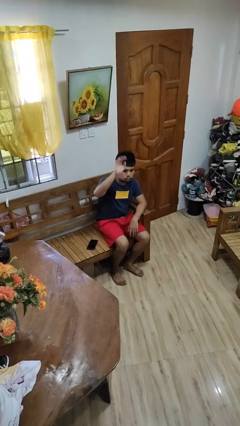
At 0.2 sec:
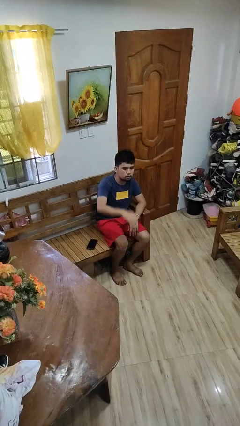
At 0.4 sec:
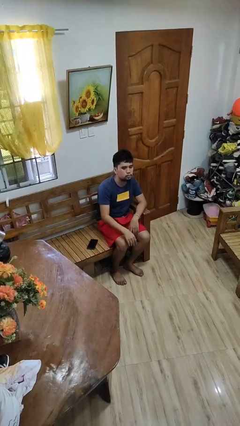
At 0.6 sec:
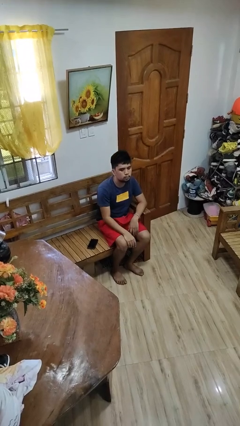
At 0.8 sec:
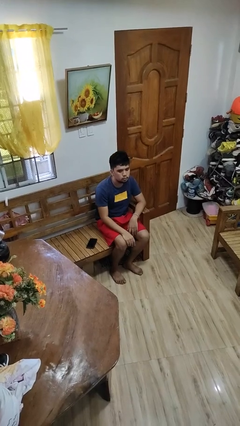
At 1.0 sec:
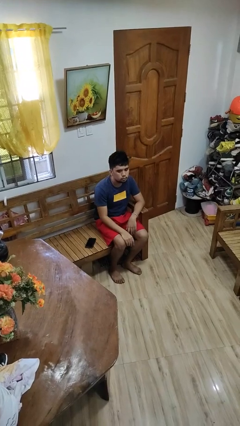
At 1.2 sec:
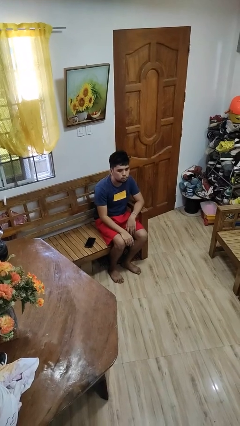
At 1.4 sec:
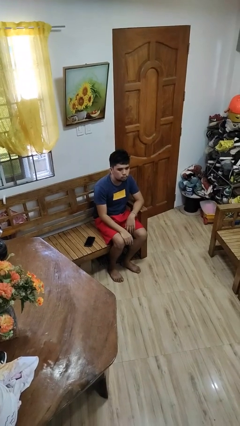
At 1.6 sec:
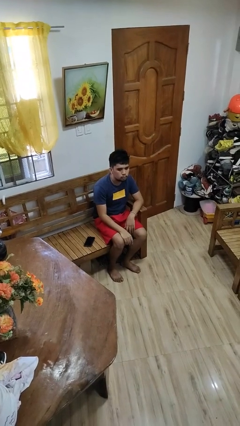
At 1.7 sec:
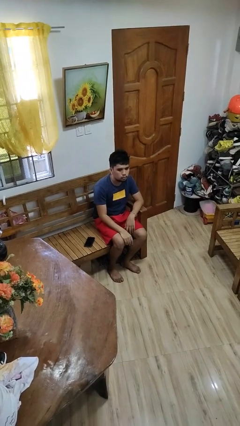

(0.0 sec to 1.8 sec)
person gestures lower hand

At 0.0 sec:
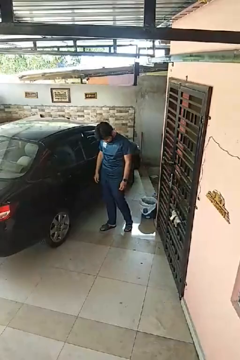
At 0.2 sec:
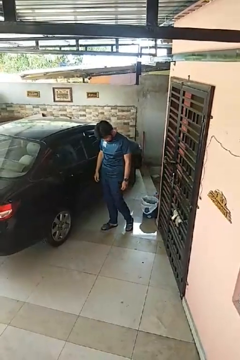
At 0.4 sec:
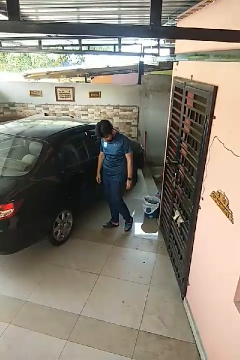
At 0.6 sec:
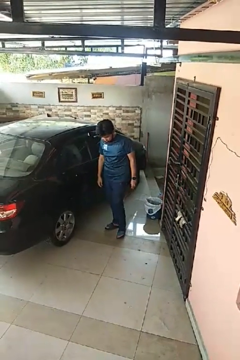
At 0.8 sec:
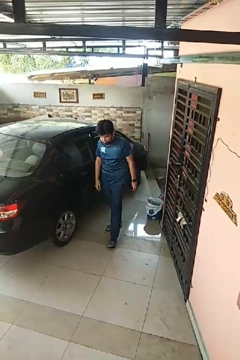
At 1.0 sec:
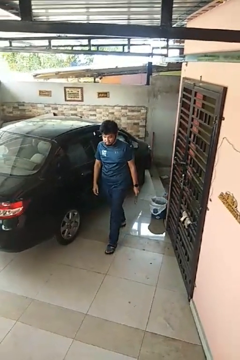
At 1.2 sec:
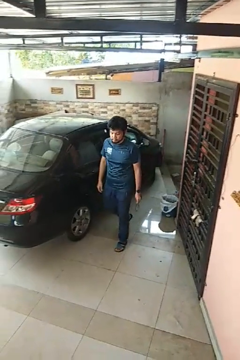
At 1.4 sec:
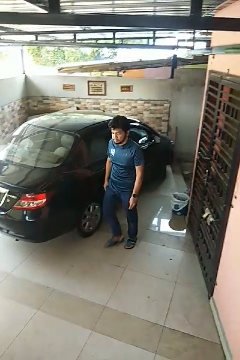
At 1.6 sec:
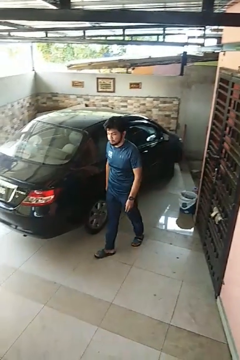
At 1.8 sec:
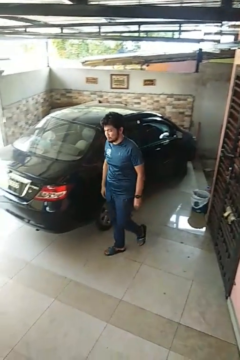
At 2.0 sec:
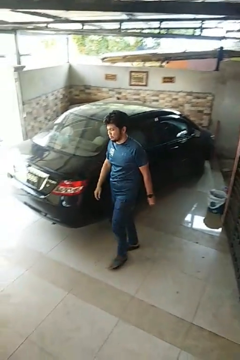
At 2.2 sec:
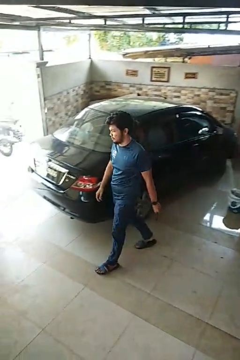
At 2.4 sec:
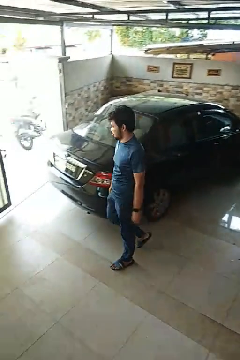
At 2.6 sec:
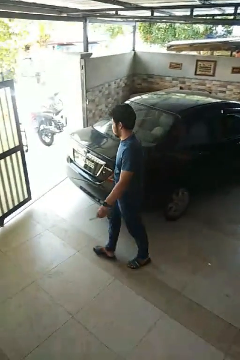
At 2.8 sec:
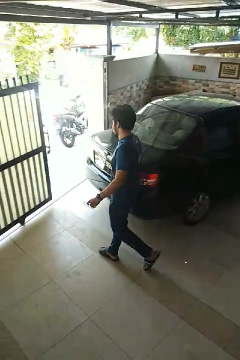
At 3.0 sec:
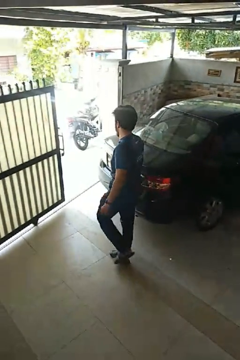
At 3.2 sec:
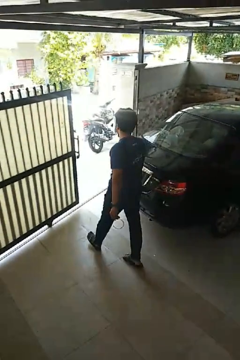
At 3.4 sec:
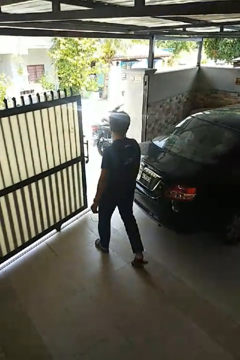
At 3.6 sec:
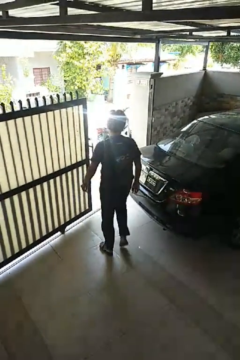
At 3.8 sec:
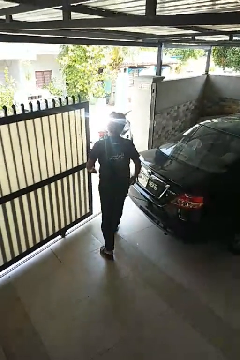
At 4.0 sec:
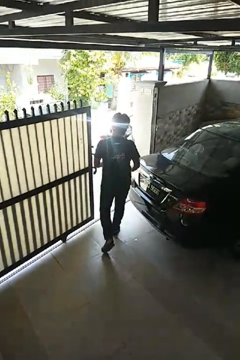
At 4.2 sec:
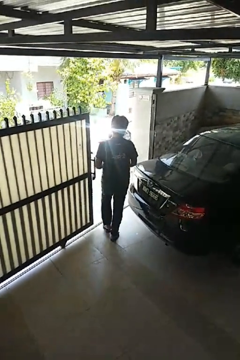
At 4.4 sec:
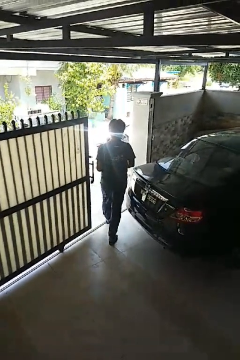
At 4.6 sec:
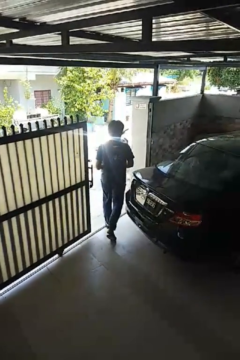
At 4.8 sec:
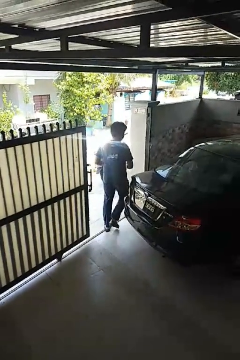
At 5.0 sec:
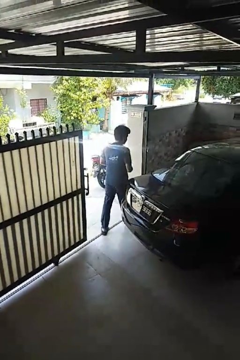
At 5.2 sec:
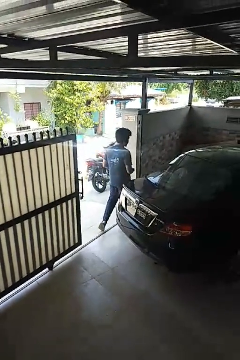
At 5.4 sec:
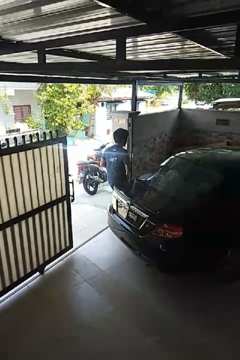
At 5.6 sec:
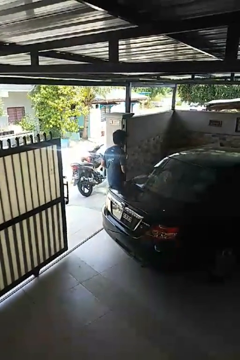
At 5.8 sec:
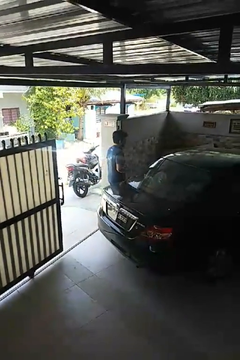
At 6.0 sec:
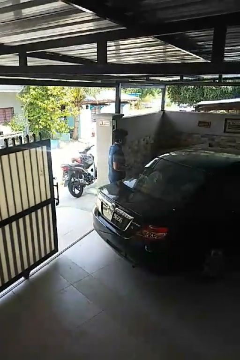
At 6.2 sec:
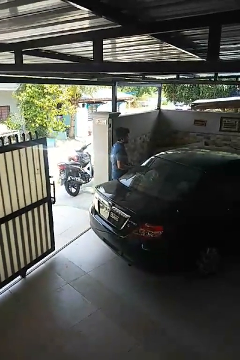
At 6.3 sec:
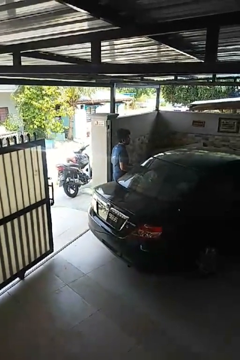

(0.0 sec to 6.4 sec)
person walks around car

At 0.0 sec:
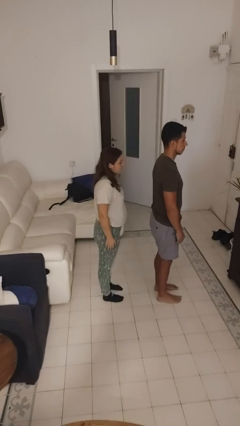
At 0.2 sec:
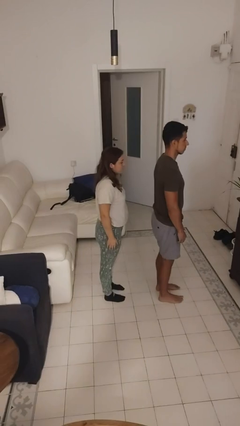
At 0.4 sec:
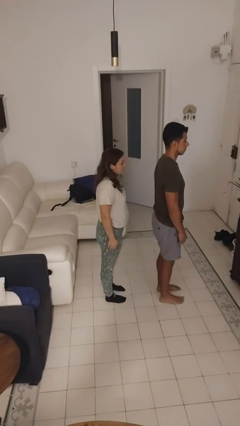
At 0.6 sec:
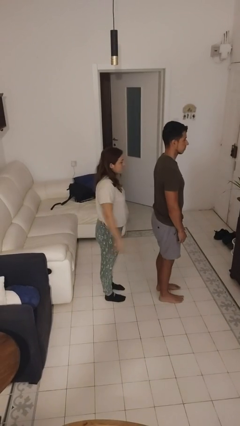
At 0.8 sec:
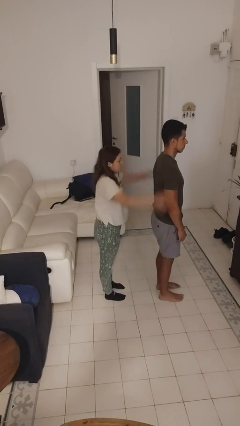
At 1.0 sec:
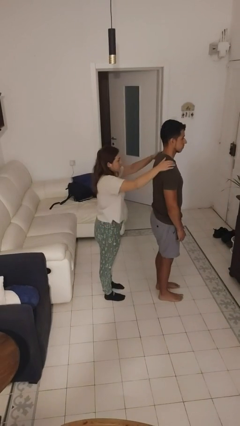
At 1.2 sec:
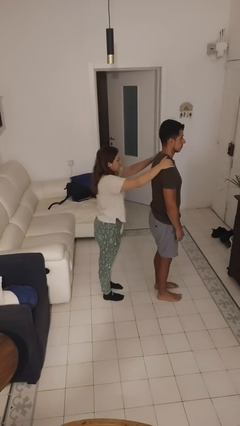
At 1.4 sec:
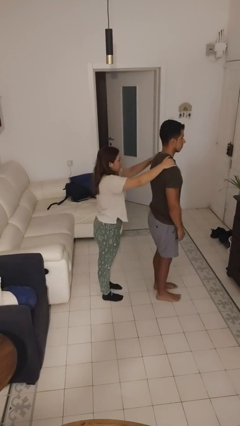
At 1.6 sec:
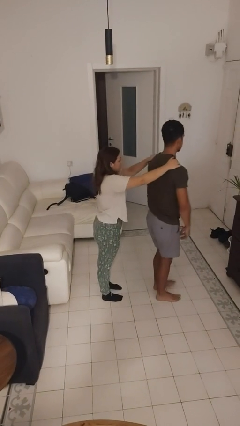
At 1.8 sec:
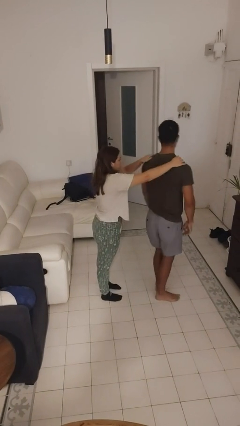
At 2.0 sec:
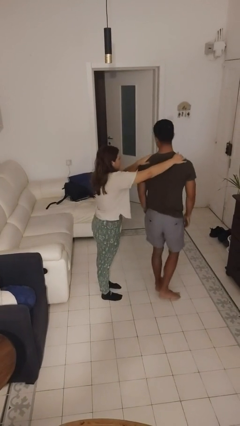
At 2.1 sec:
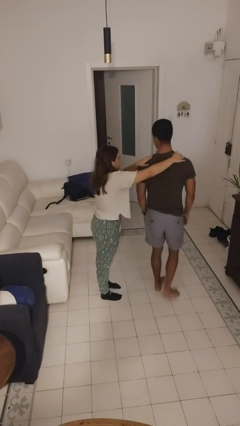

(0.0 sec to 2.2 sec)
person grabs person by shoulder

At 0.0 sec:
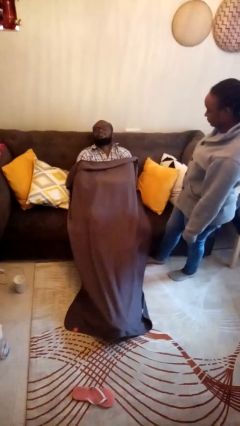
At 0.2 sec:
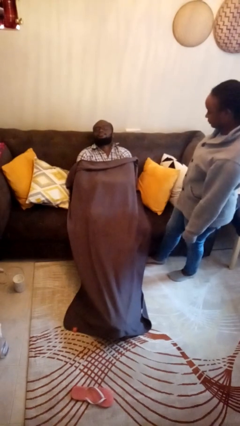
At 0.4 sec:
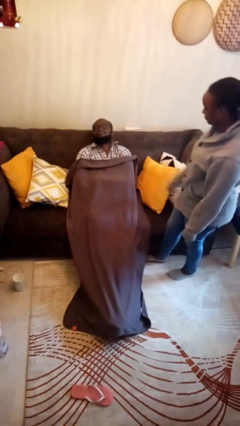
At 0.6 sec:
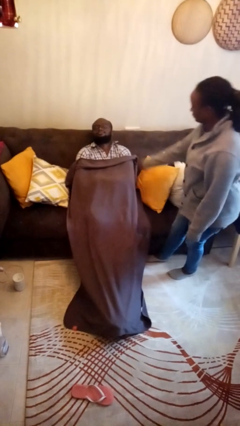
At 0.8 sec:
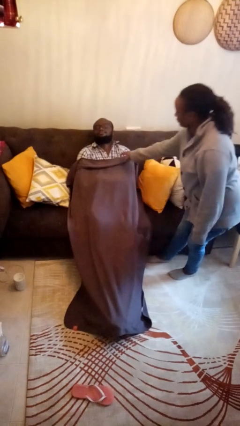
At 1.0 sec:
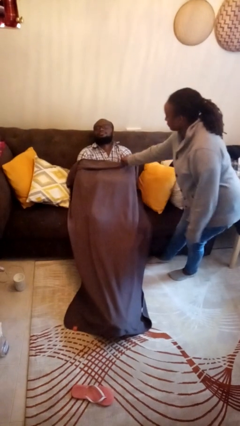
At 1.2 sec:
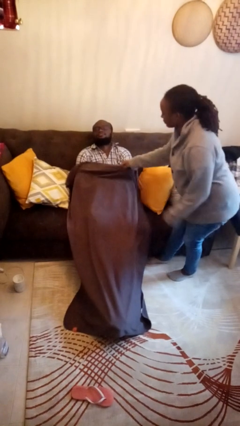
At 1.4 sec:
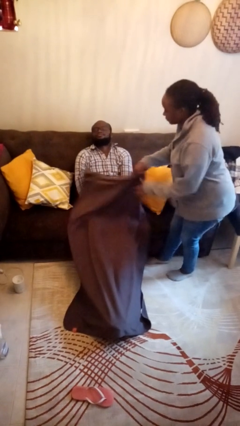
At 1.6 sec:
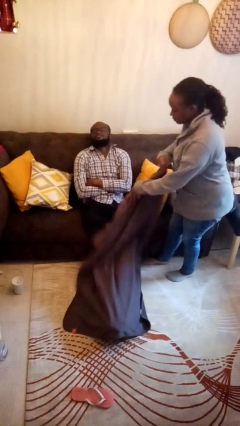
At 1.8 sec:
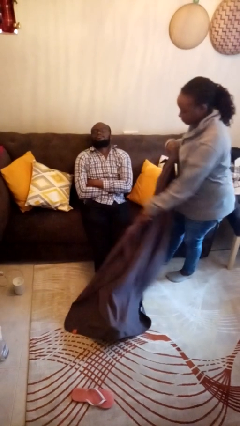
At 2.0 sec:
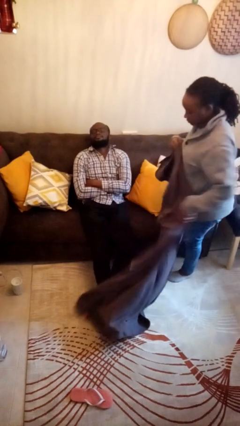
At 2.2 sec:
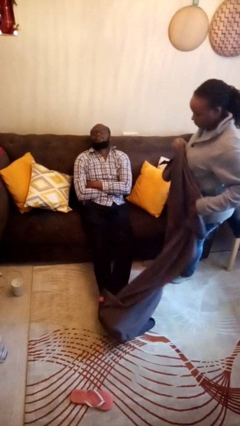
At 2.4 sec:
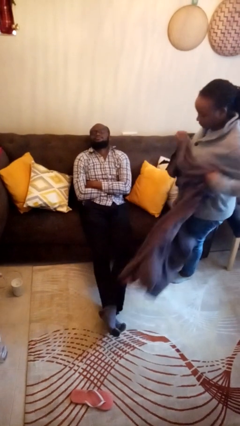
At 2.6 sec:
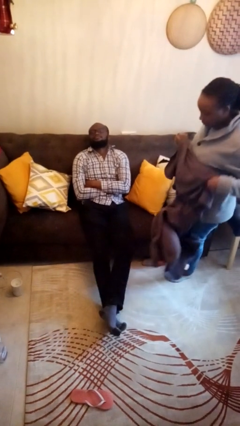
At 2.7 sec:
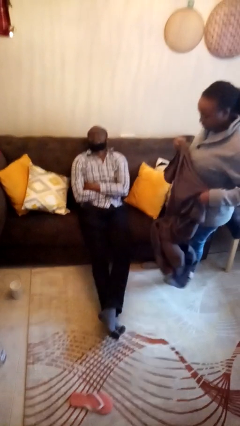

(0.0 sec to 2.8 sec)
person uncovers friend with blanket

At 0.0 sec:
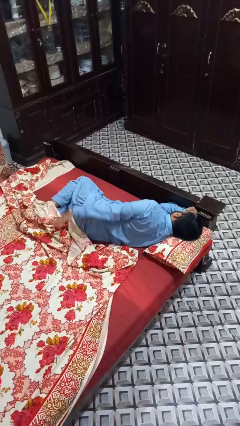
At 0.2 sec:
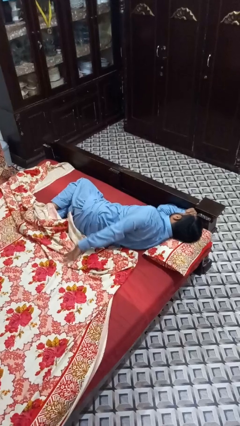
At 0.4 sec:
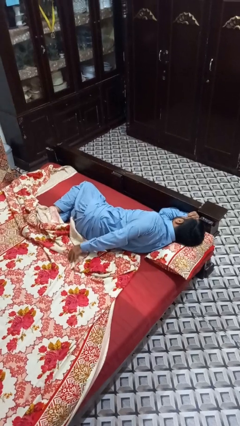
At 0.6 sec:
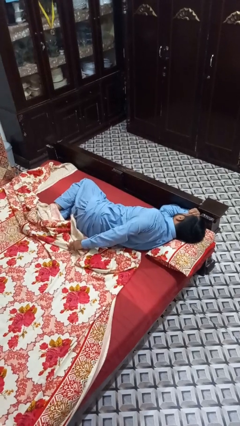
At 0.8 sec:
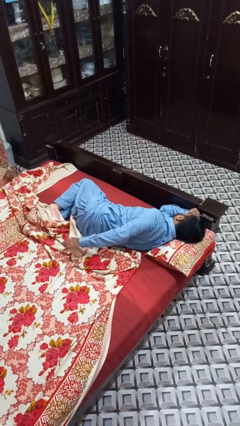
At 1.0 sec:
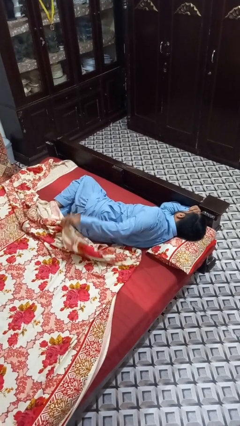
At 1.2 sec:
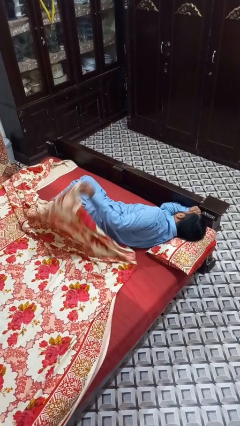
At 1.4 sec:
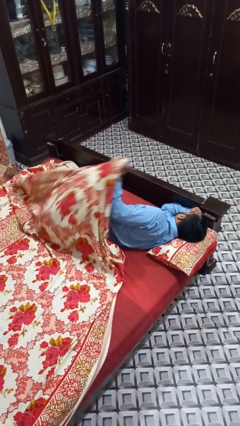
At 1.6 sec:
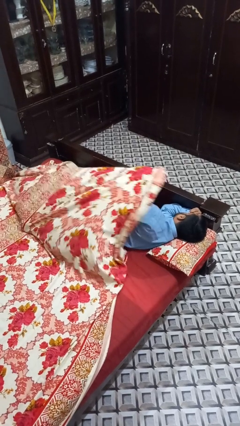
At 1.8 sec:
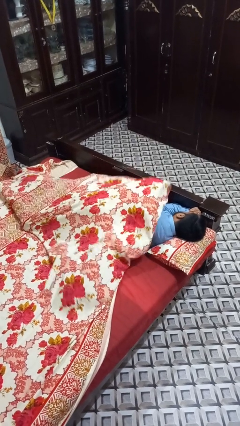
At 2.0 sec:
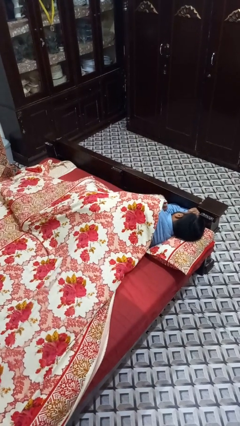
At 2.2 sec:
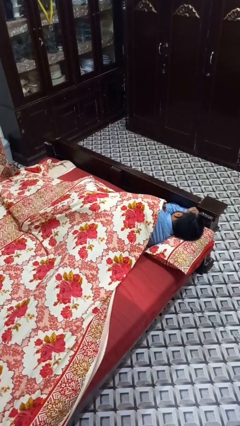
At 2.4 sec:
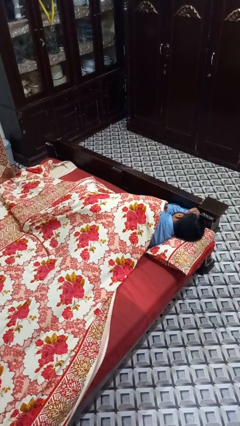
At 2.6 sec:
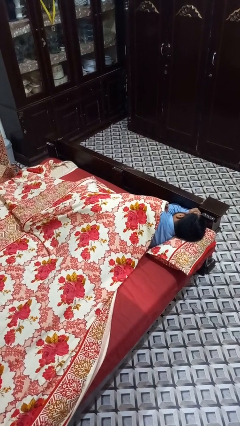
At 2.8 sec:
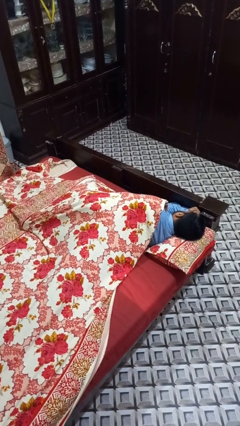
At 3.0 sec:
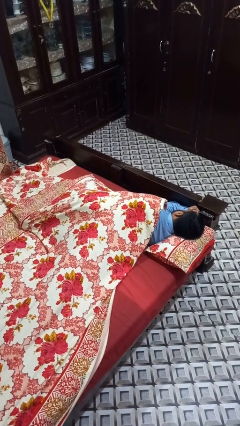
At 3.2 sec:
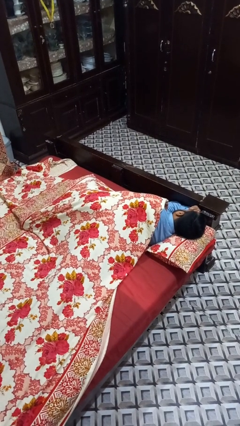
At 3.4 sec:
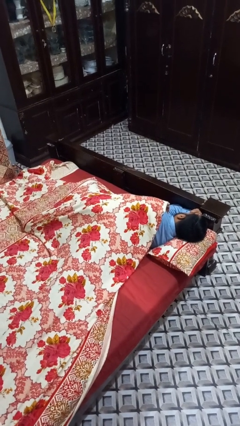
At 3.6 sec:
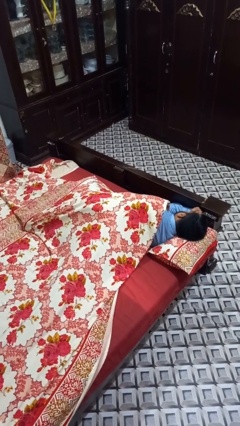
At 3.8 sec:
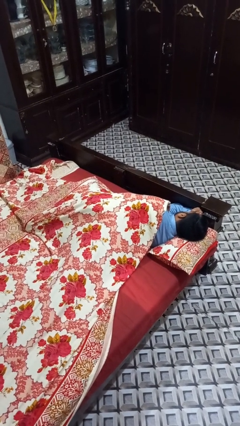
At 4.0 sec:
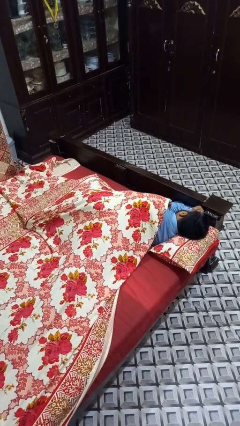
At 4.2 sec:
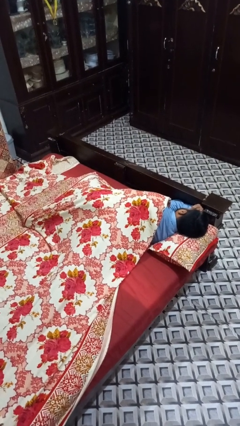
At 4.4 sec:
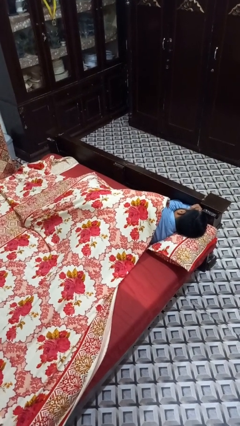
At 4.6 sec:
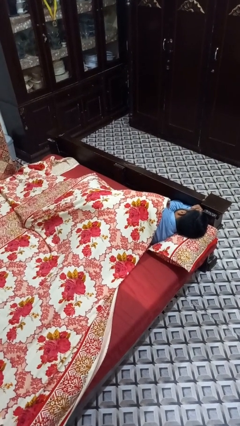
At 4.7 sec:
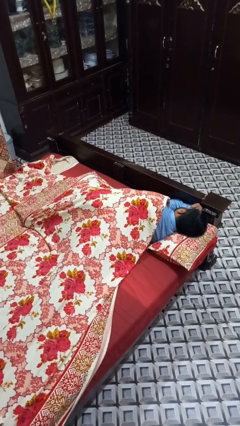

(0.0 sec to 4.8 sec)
person covers with bedsheets
